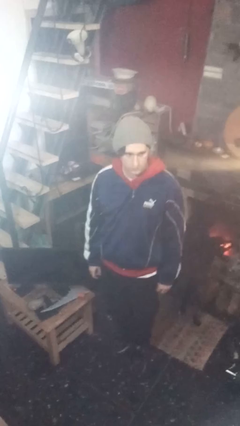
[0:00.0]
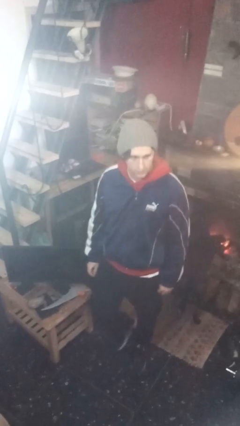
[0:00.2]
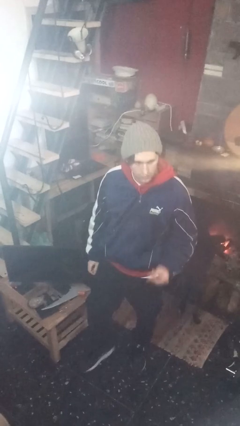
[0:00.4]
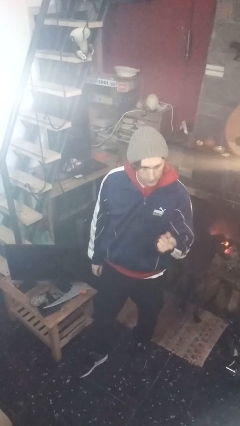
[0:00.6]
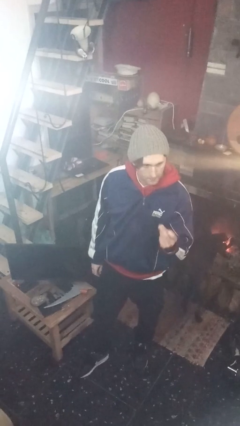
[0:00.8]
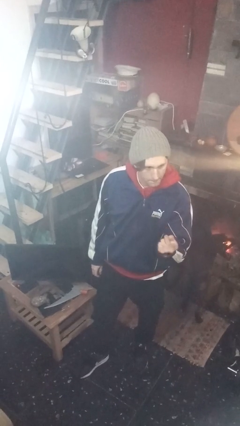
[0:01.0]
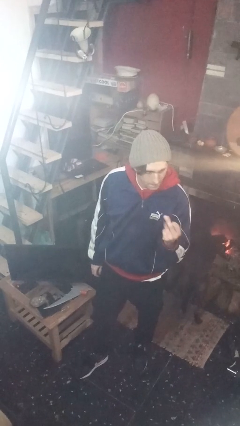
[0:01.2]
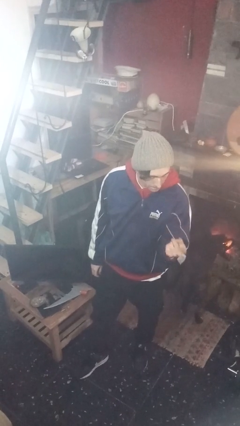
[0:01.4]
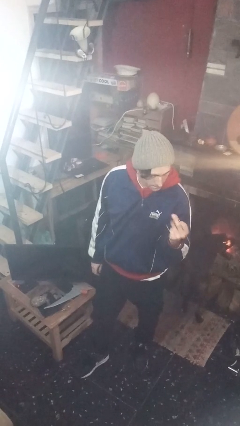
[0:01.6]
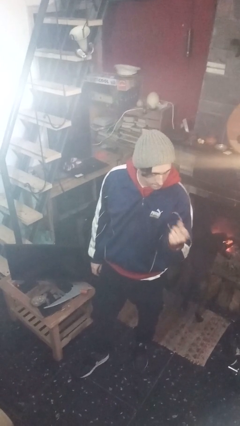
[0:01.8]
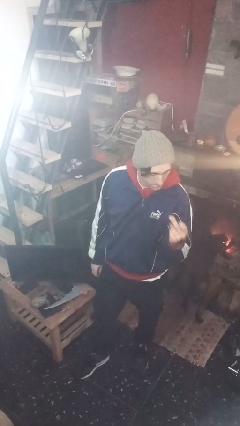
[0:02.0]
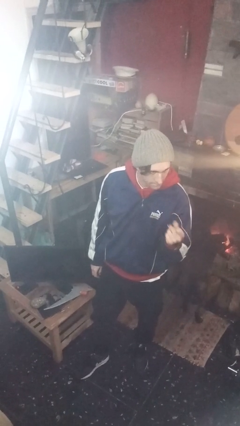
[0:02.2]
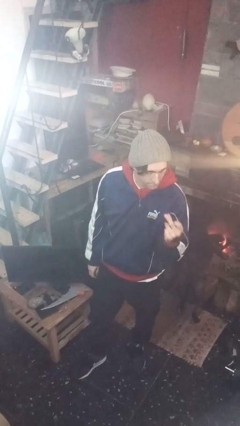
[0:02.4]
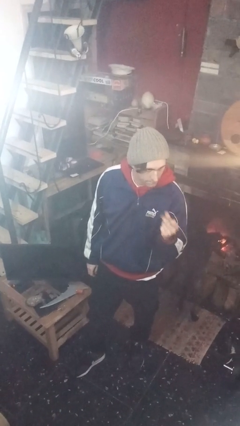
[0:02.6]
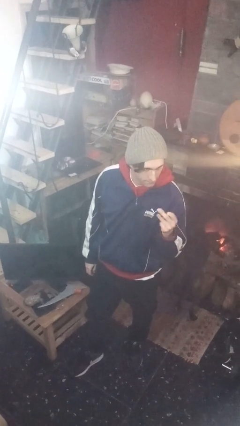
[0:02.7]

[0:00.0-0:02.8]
person snaps fingers

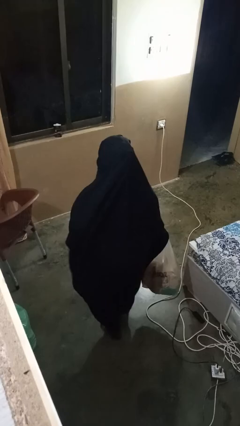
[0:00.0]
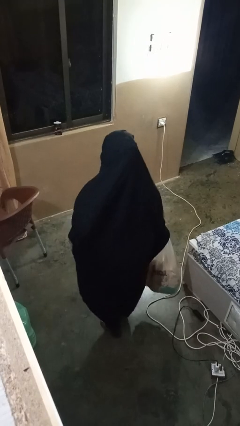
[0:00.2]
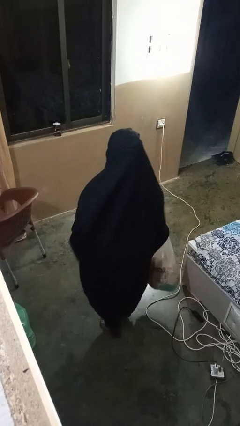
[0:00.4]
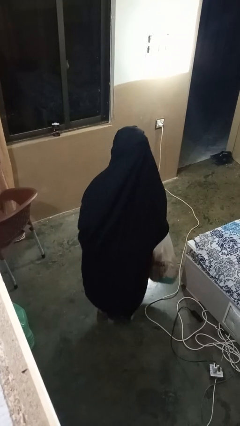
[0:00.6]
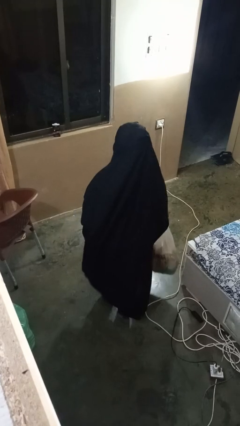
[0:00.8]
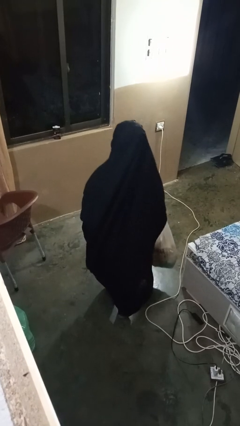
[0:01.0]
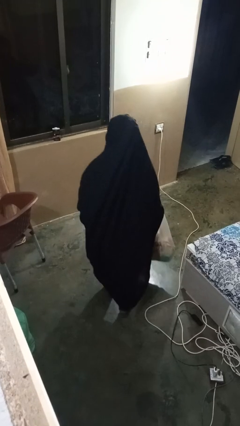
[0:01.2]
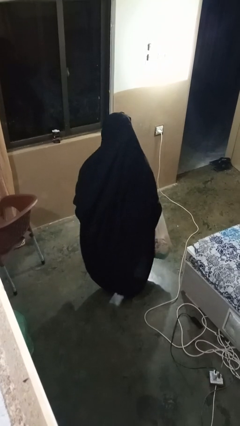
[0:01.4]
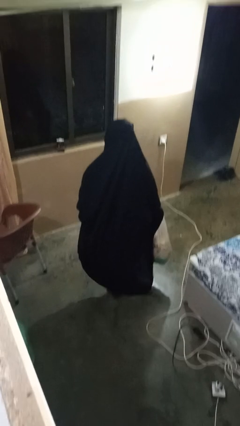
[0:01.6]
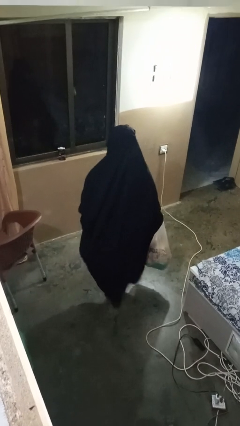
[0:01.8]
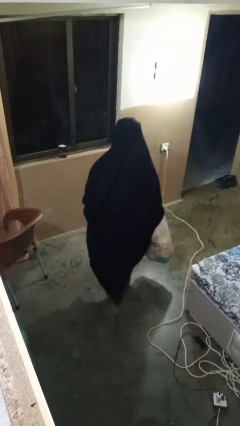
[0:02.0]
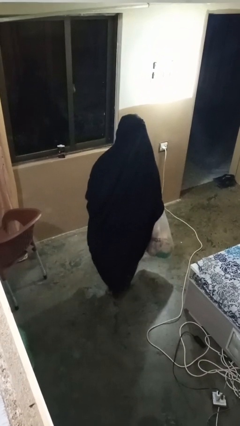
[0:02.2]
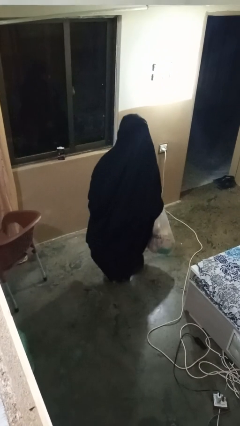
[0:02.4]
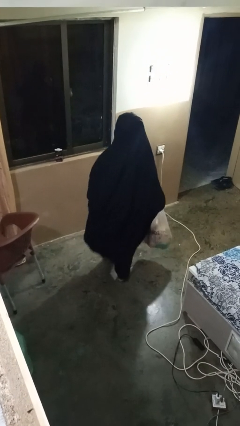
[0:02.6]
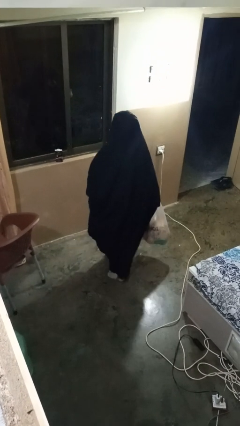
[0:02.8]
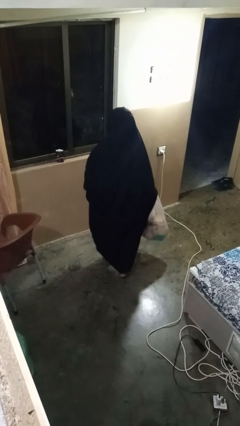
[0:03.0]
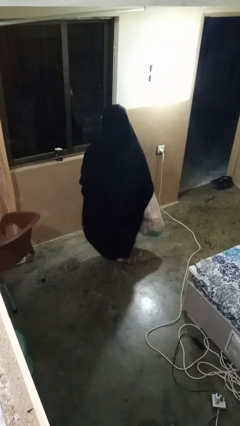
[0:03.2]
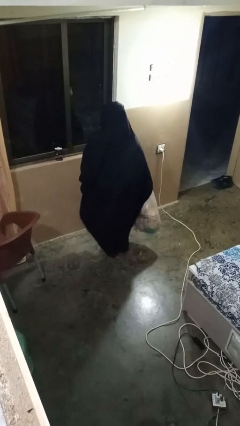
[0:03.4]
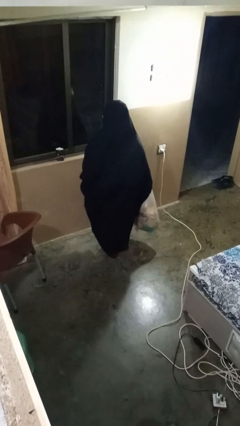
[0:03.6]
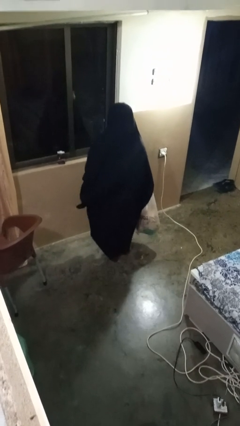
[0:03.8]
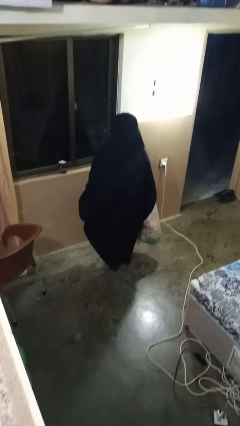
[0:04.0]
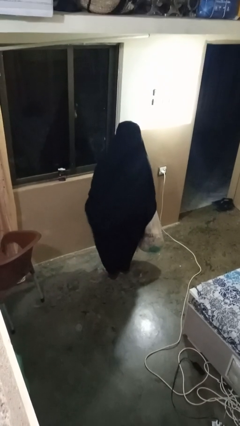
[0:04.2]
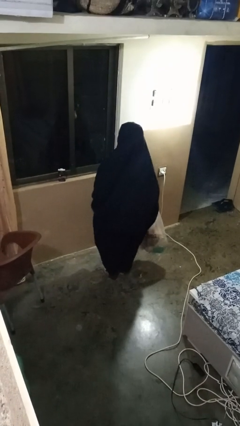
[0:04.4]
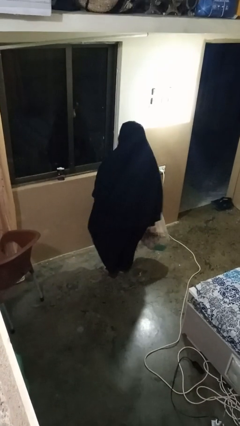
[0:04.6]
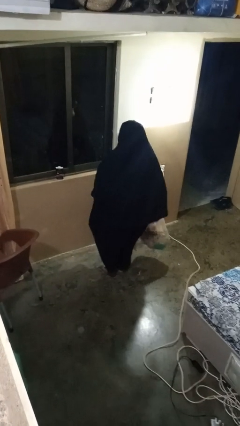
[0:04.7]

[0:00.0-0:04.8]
person carries groceries

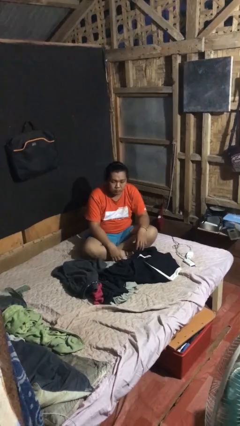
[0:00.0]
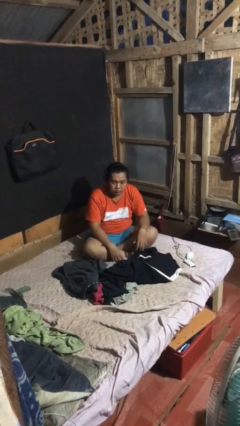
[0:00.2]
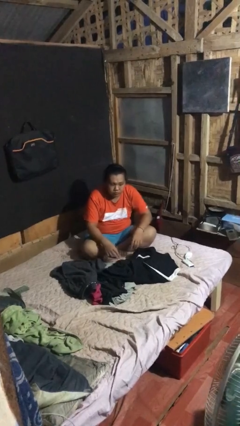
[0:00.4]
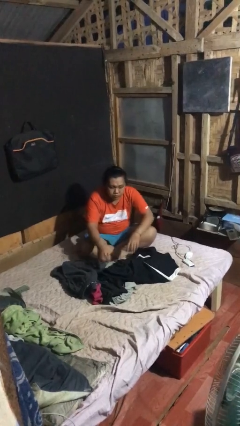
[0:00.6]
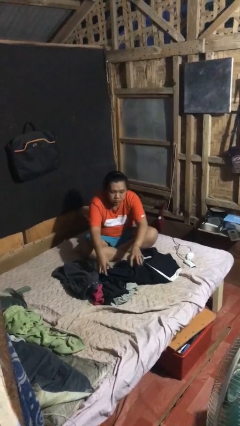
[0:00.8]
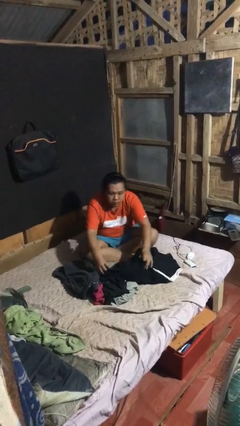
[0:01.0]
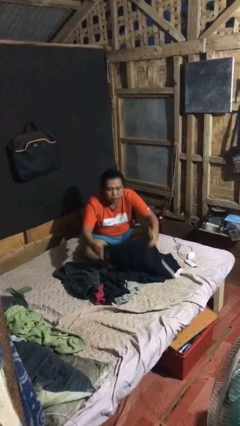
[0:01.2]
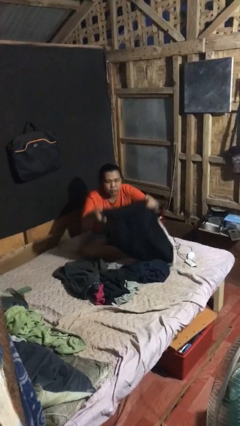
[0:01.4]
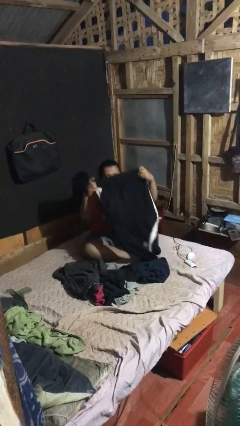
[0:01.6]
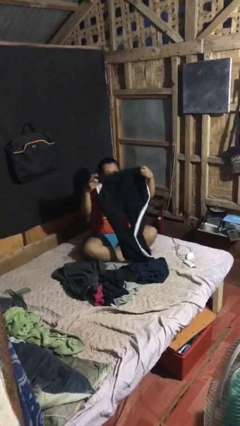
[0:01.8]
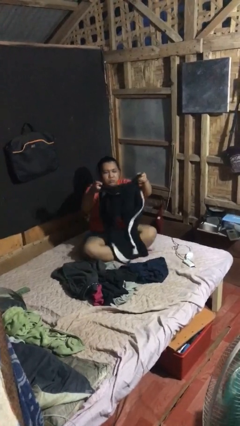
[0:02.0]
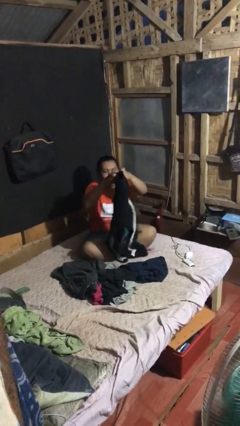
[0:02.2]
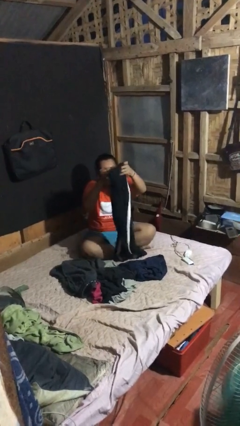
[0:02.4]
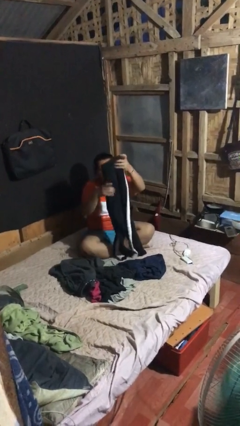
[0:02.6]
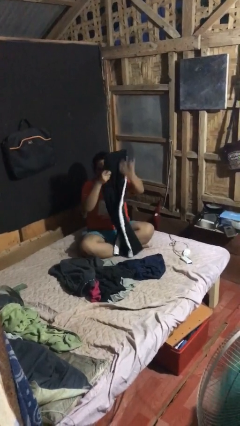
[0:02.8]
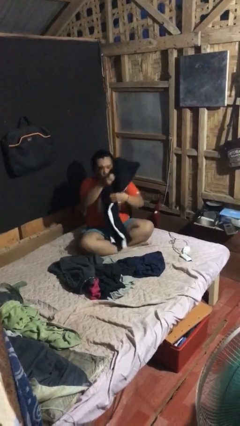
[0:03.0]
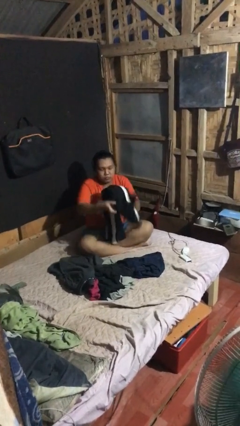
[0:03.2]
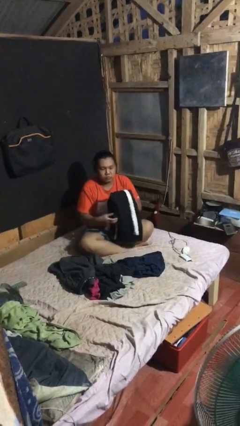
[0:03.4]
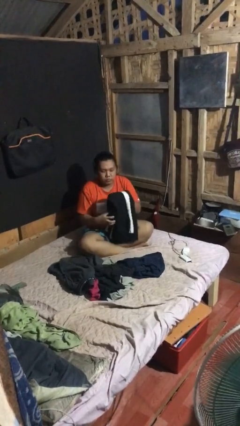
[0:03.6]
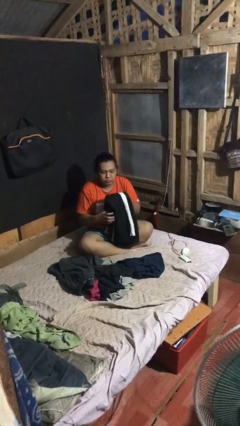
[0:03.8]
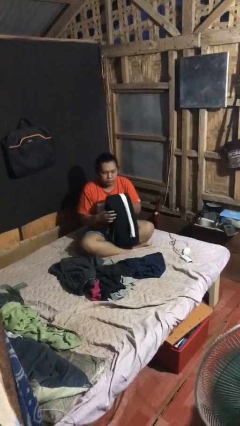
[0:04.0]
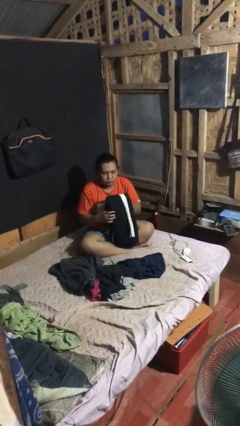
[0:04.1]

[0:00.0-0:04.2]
person folds pants

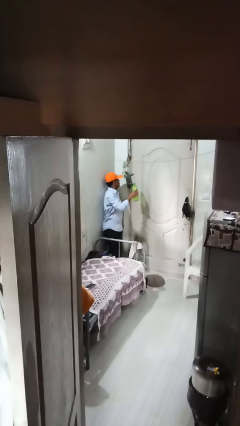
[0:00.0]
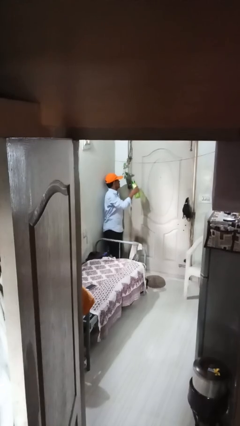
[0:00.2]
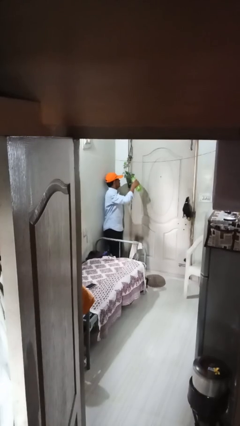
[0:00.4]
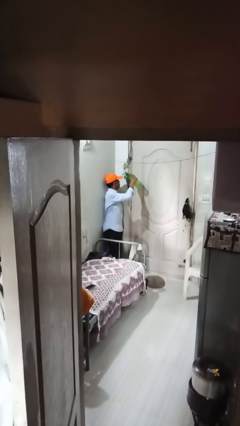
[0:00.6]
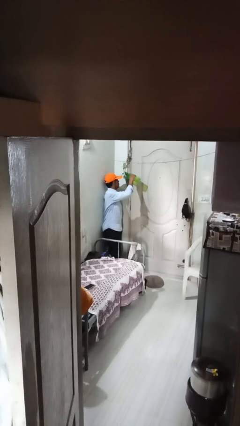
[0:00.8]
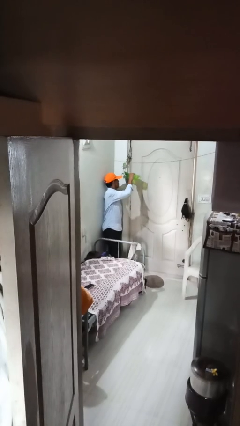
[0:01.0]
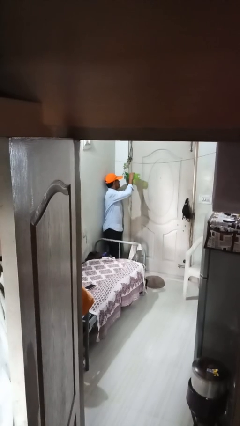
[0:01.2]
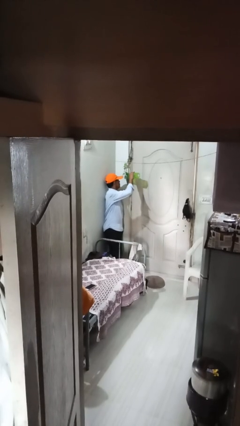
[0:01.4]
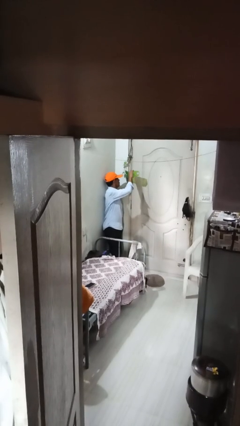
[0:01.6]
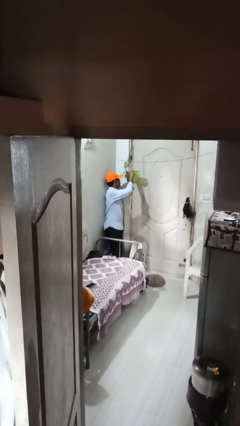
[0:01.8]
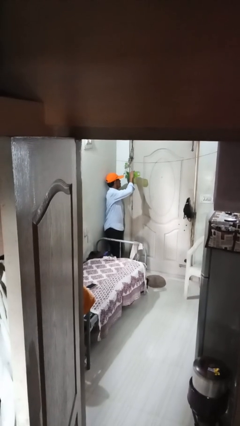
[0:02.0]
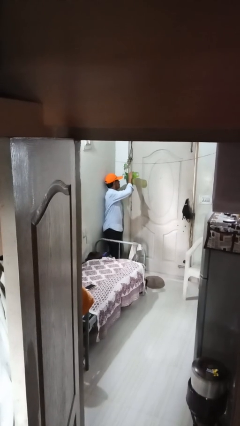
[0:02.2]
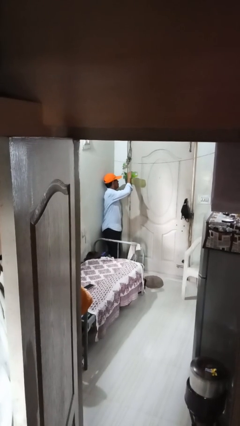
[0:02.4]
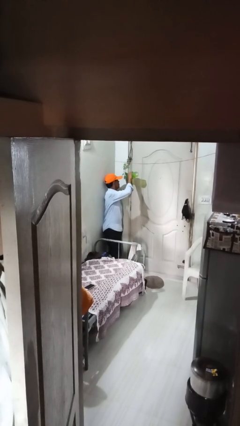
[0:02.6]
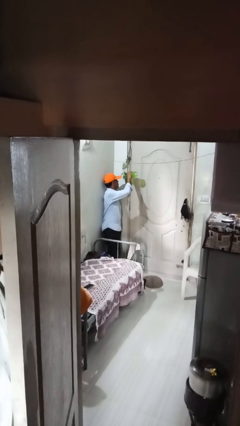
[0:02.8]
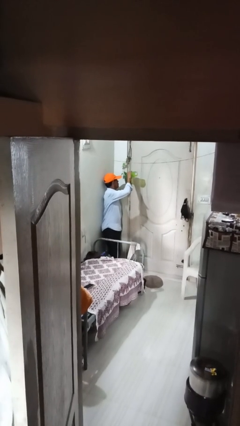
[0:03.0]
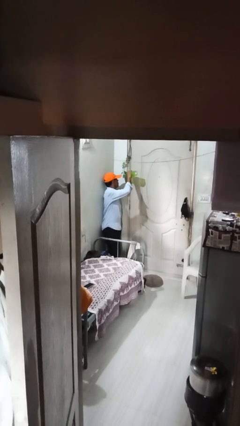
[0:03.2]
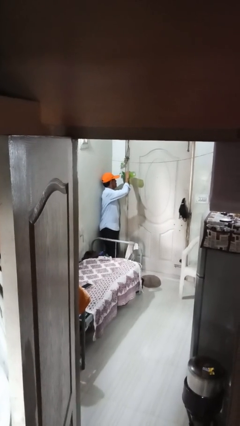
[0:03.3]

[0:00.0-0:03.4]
person waters houseplant

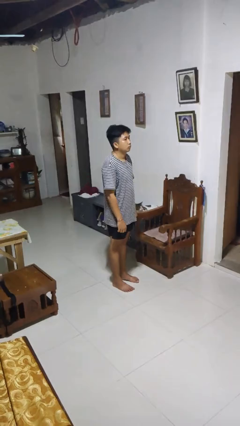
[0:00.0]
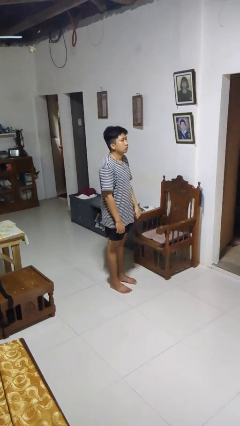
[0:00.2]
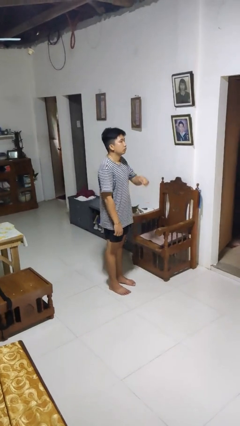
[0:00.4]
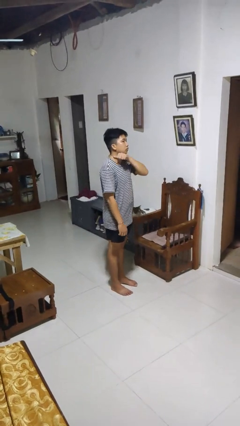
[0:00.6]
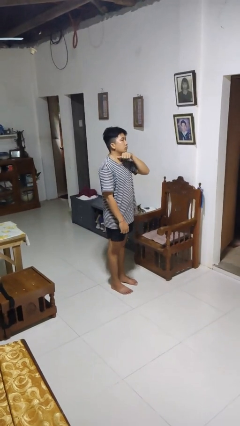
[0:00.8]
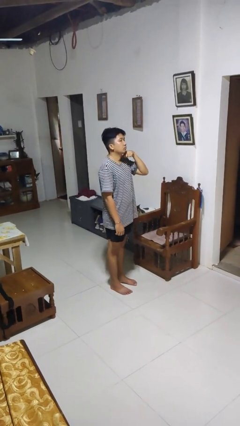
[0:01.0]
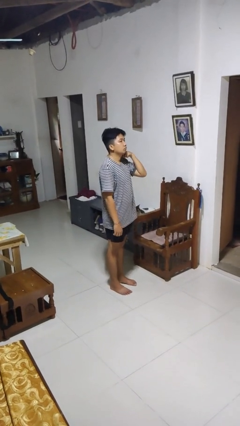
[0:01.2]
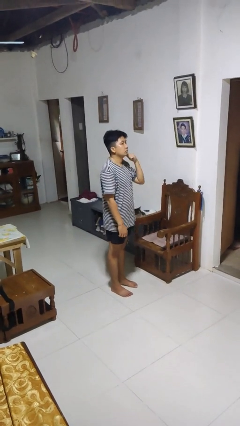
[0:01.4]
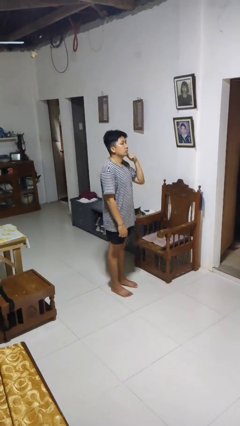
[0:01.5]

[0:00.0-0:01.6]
person gestures cut

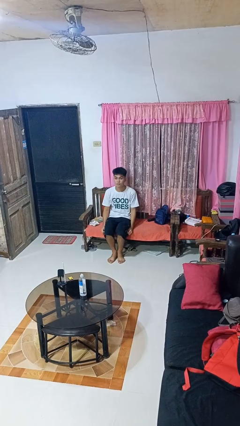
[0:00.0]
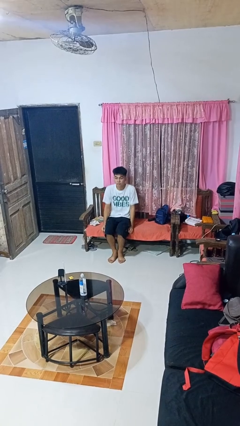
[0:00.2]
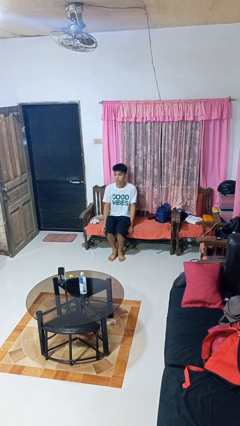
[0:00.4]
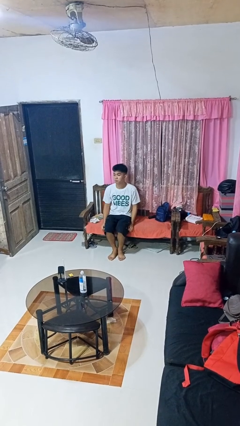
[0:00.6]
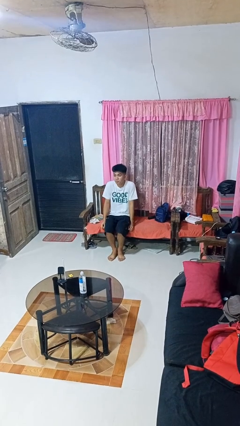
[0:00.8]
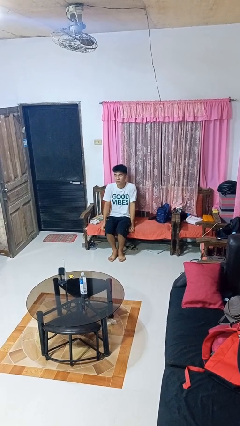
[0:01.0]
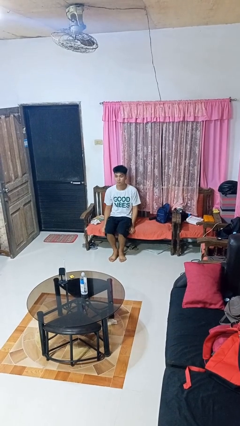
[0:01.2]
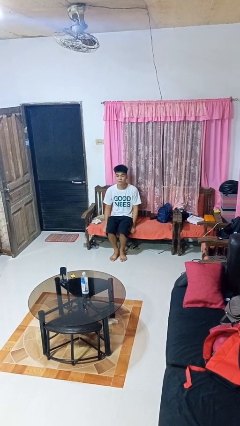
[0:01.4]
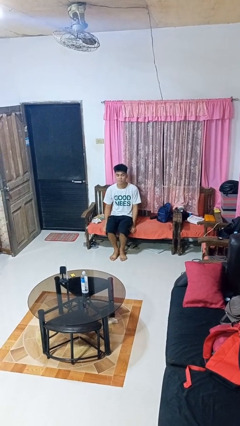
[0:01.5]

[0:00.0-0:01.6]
person shrugs
